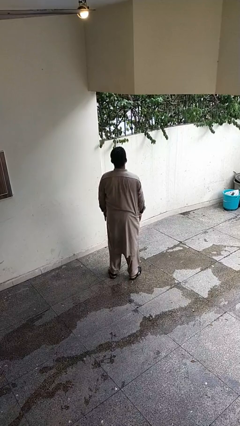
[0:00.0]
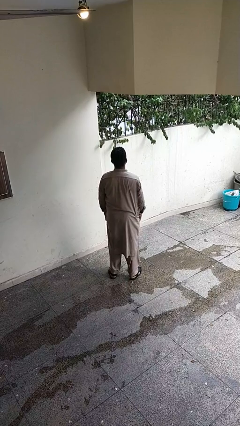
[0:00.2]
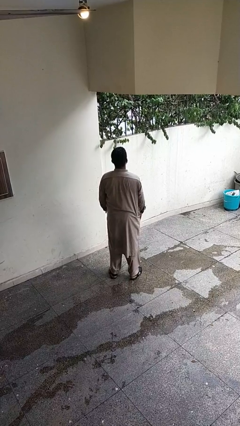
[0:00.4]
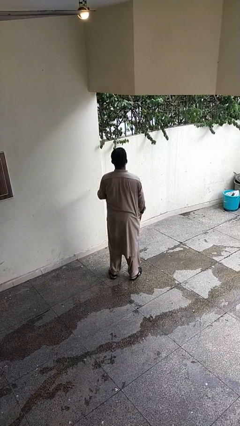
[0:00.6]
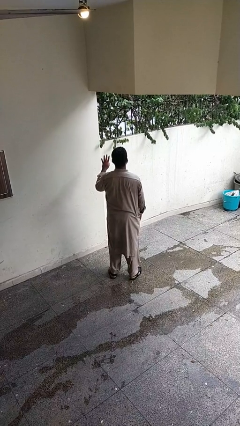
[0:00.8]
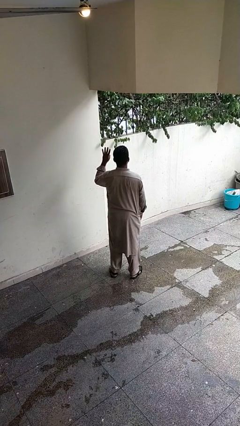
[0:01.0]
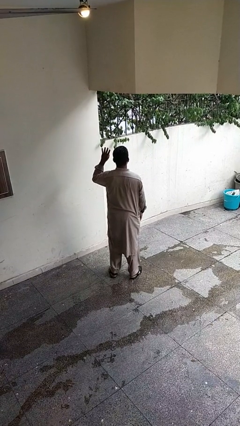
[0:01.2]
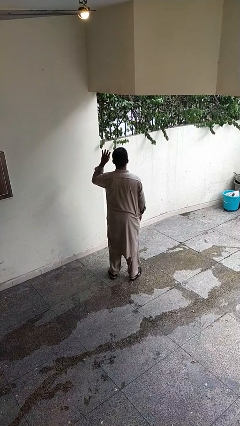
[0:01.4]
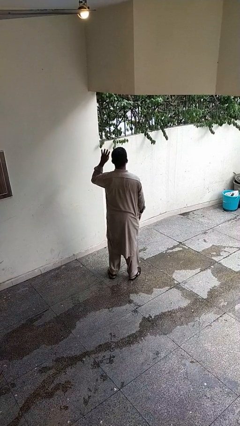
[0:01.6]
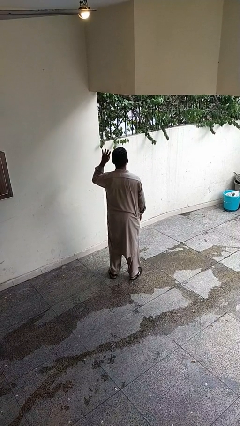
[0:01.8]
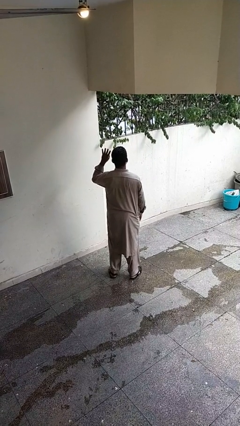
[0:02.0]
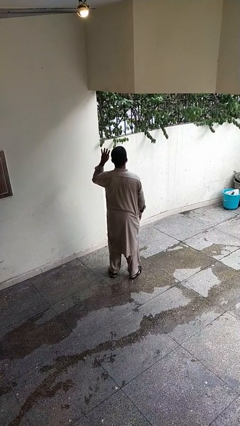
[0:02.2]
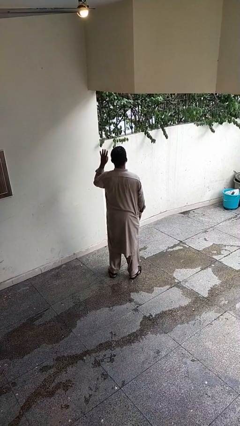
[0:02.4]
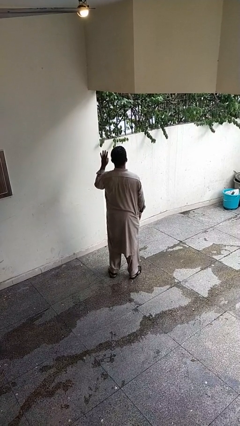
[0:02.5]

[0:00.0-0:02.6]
person gestures number four

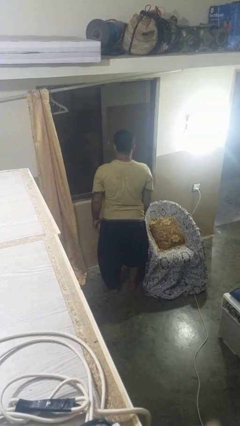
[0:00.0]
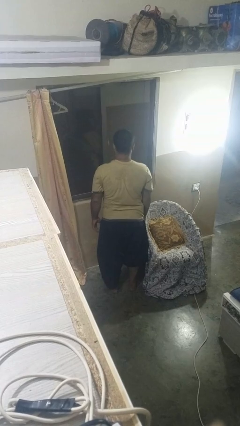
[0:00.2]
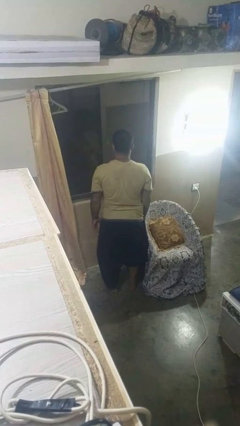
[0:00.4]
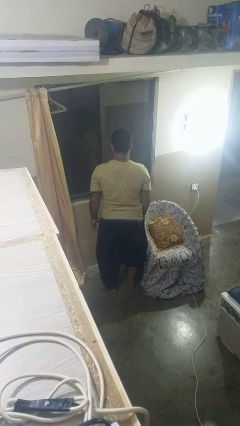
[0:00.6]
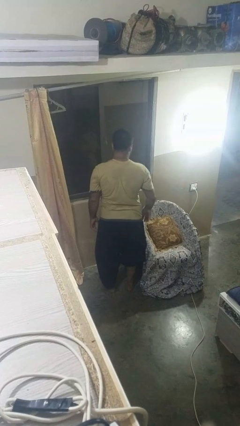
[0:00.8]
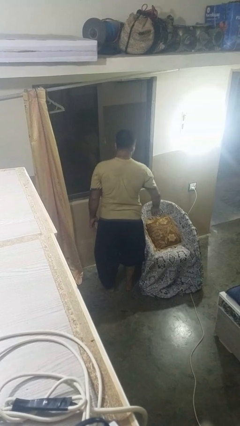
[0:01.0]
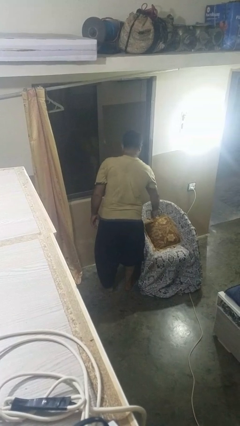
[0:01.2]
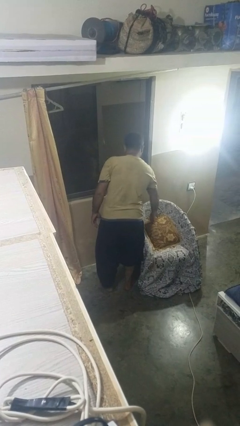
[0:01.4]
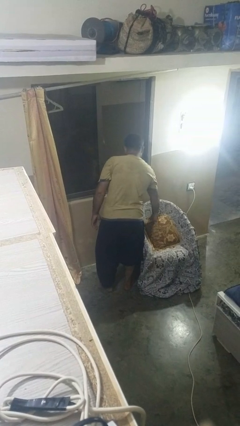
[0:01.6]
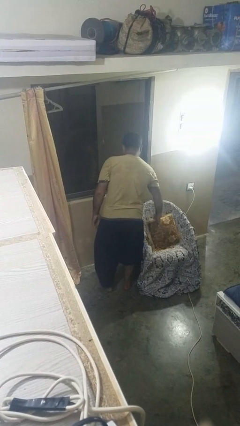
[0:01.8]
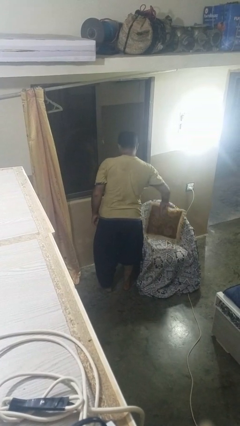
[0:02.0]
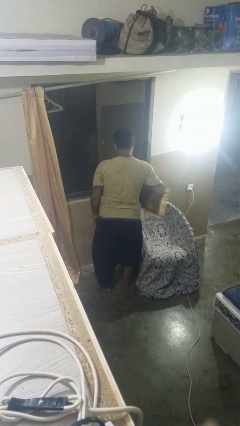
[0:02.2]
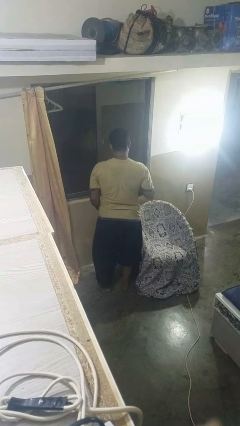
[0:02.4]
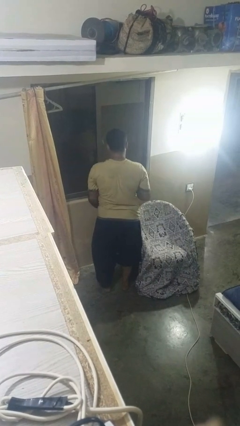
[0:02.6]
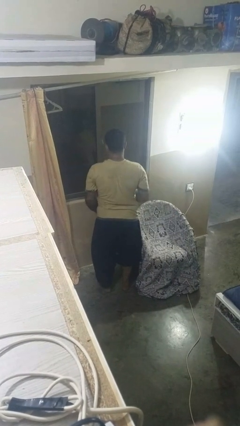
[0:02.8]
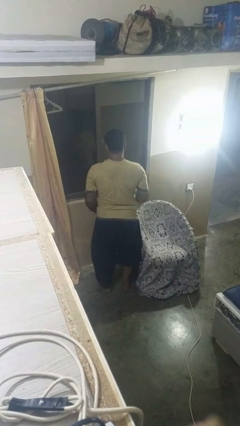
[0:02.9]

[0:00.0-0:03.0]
person picks up object from couch

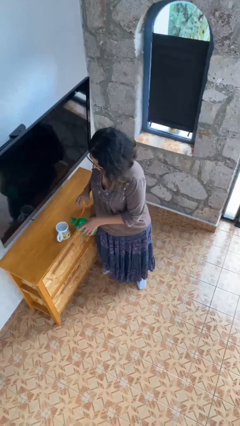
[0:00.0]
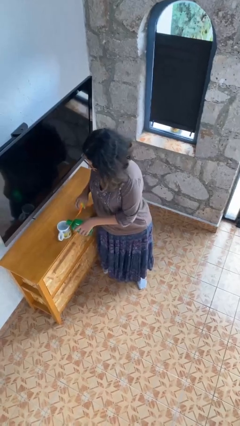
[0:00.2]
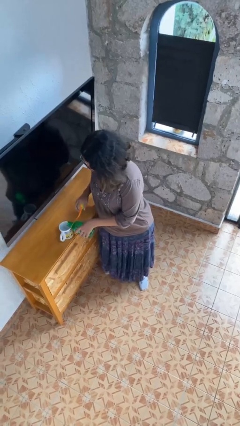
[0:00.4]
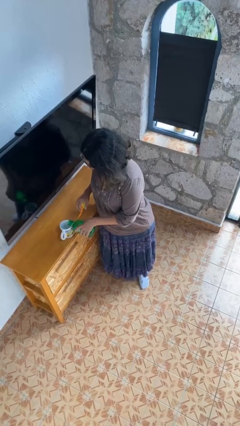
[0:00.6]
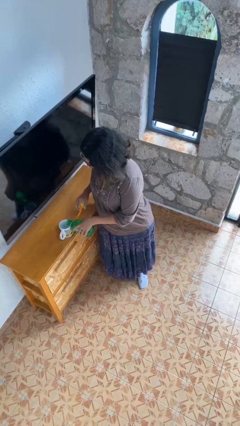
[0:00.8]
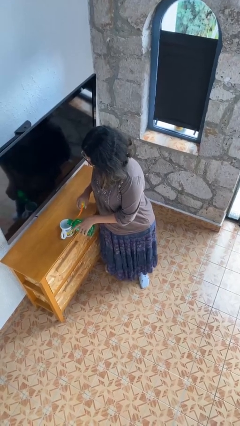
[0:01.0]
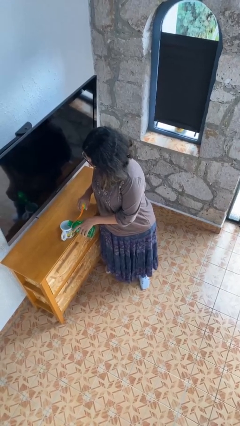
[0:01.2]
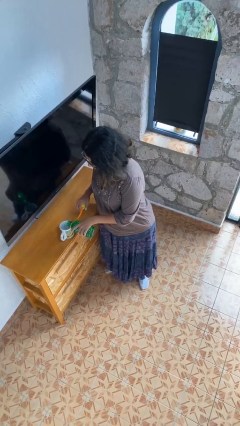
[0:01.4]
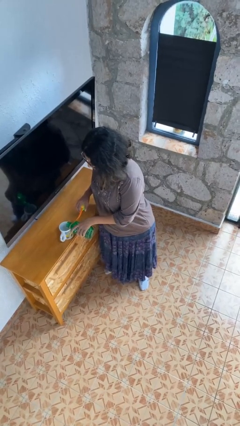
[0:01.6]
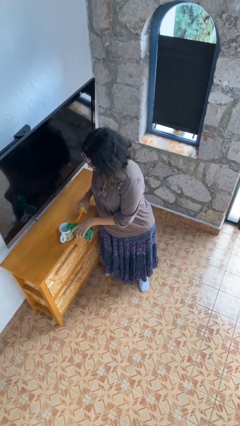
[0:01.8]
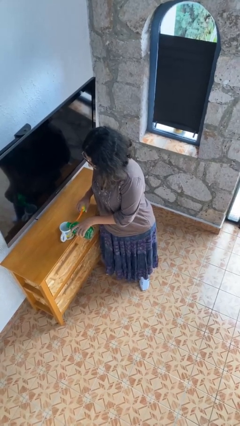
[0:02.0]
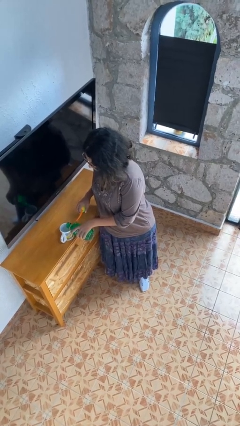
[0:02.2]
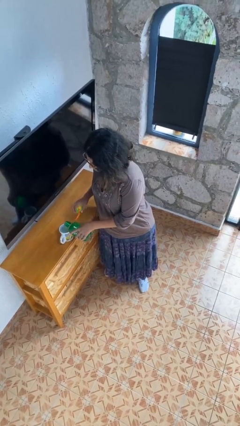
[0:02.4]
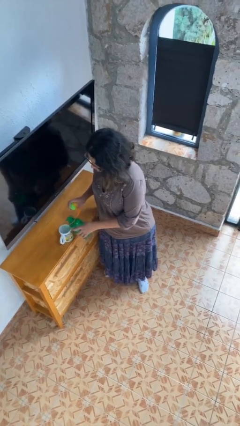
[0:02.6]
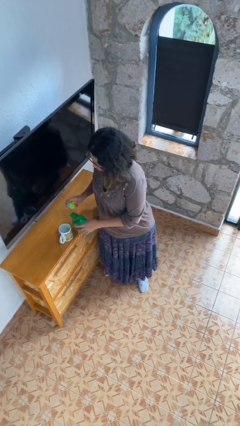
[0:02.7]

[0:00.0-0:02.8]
person pours liquid into cup

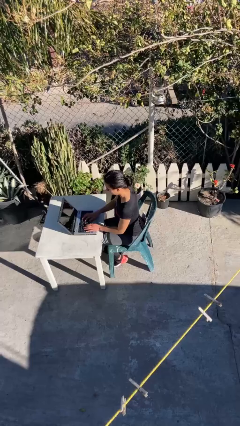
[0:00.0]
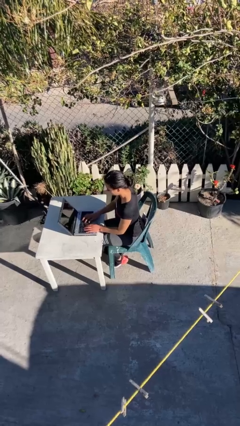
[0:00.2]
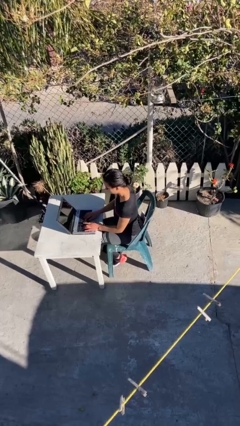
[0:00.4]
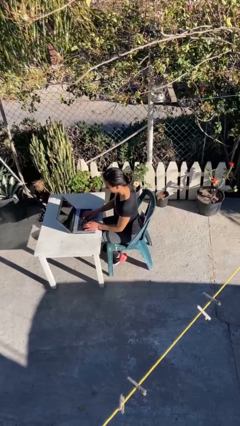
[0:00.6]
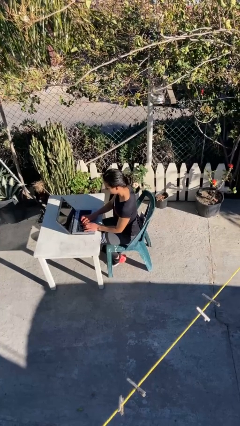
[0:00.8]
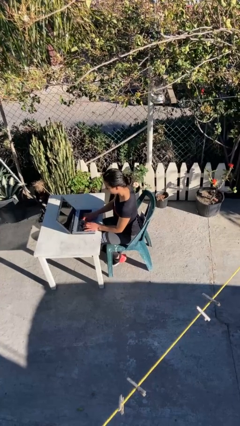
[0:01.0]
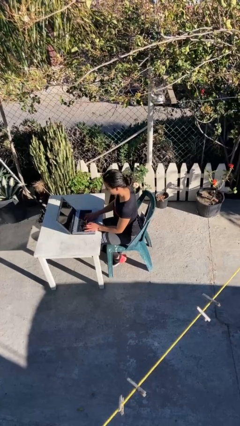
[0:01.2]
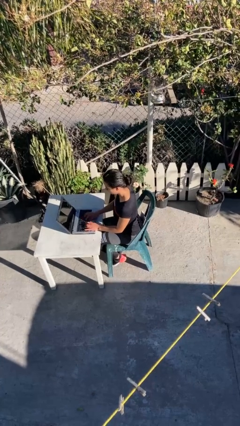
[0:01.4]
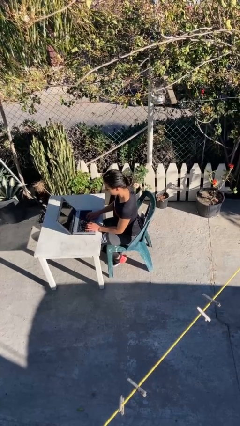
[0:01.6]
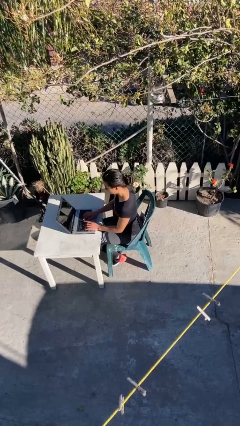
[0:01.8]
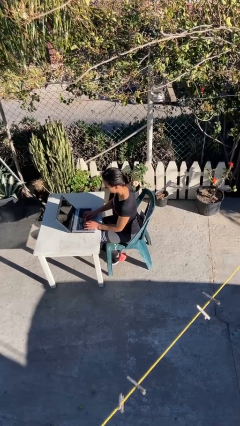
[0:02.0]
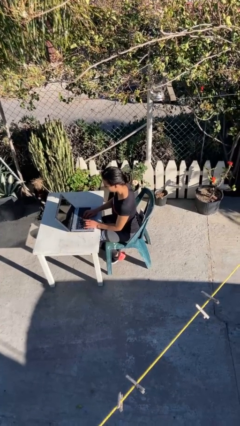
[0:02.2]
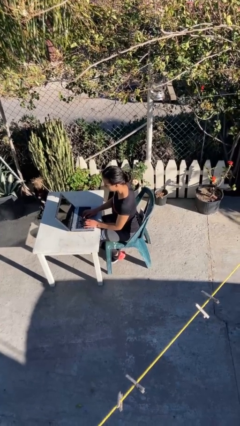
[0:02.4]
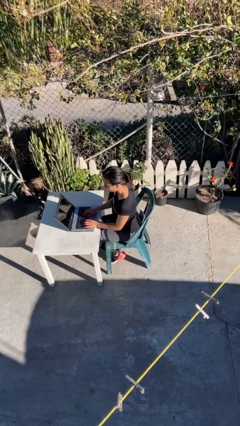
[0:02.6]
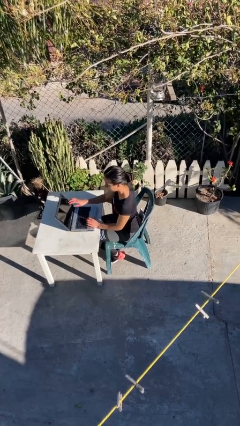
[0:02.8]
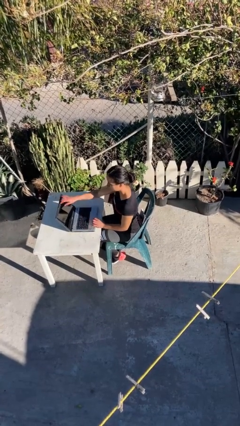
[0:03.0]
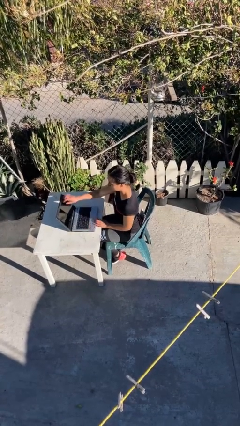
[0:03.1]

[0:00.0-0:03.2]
person interacts with laptop

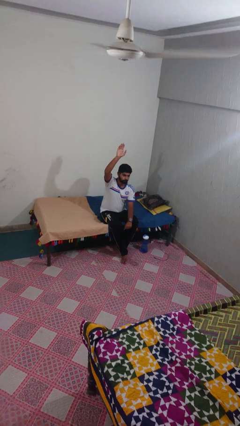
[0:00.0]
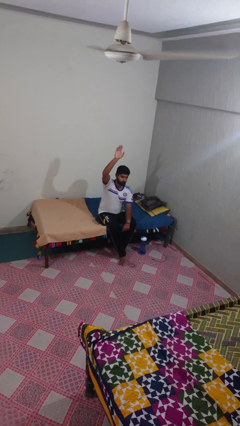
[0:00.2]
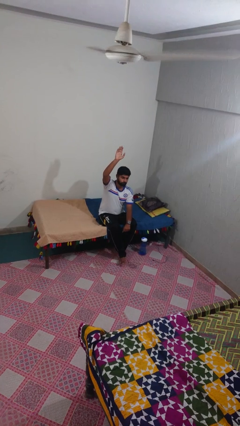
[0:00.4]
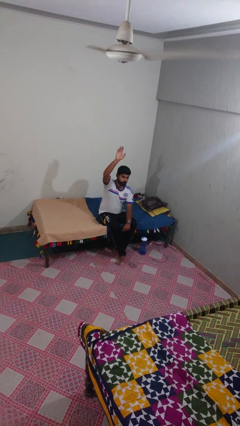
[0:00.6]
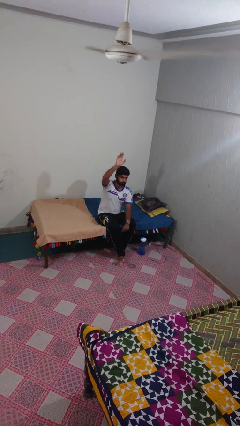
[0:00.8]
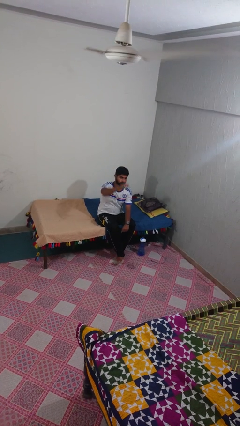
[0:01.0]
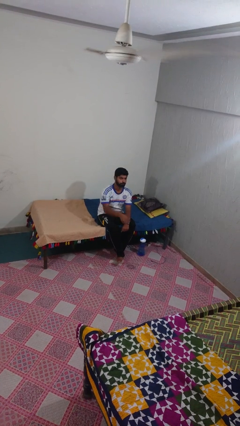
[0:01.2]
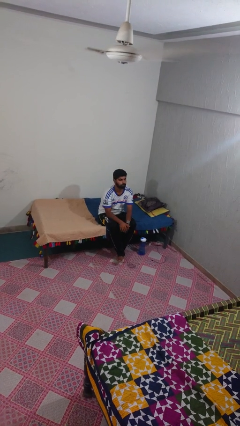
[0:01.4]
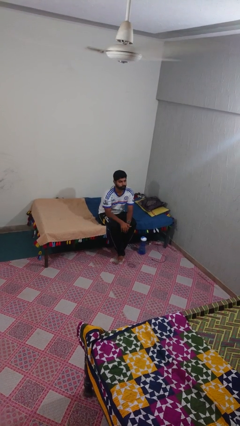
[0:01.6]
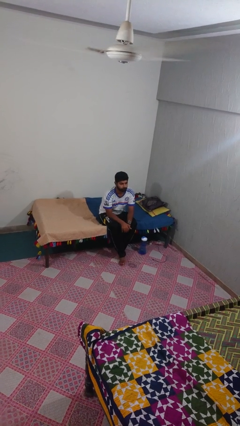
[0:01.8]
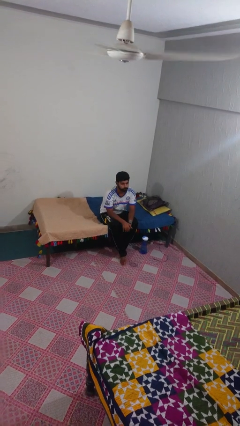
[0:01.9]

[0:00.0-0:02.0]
person gestures lower hand

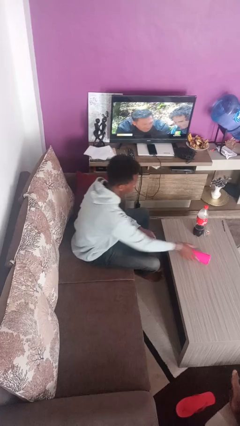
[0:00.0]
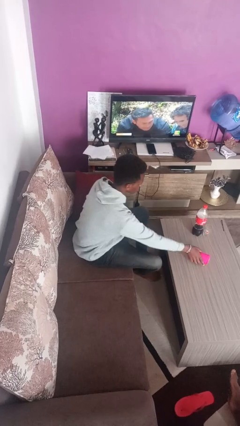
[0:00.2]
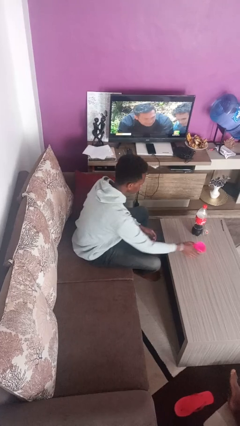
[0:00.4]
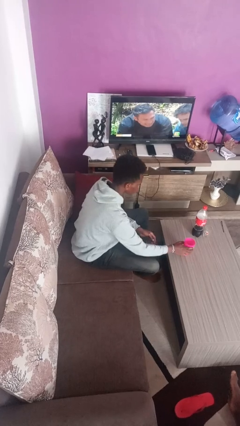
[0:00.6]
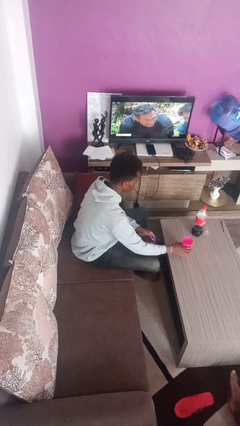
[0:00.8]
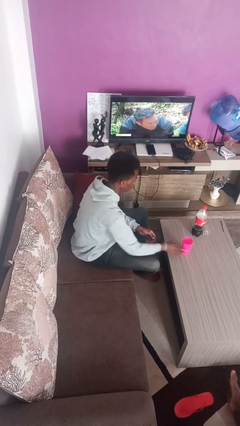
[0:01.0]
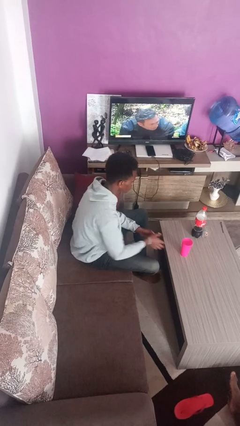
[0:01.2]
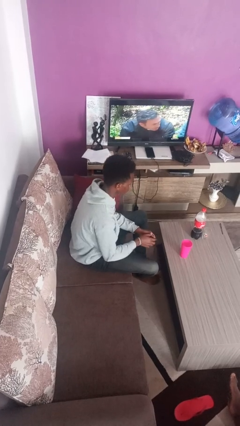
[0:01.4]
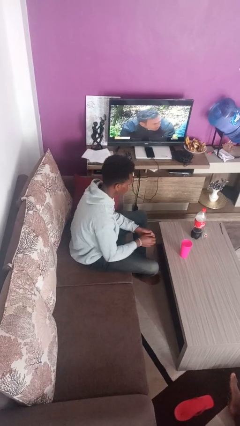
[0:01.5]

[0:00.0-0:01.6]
person sets upright glass

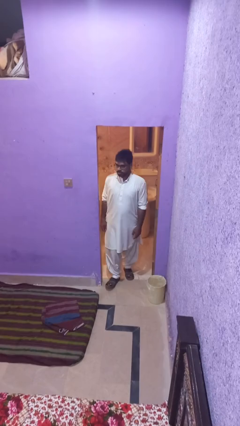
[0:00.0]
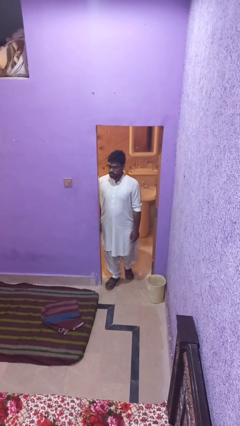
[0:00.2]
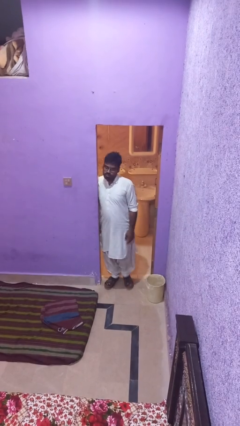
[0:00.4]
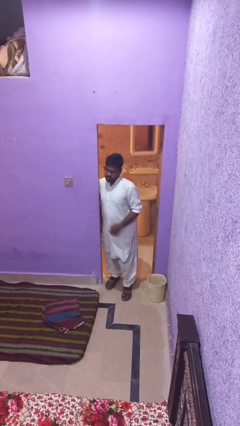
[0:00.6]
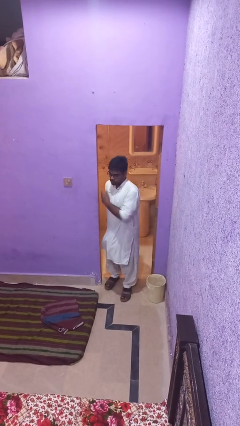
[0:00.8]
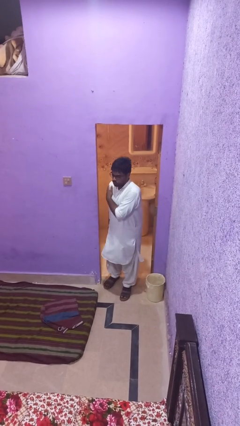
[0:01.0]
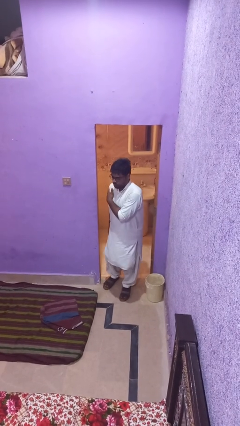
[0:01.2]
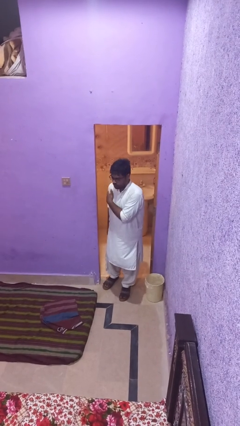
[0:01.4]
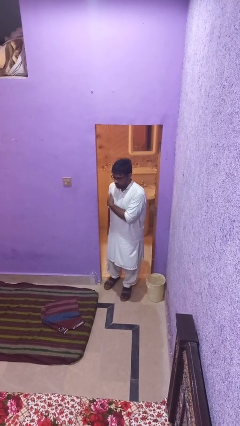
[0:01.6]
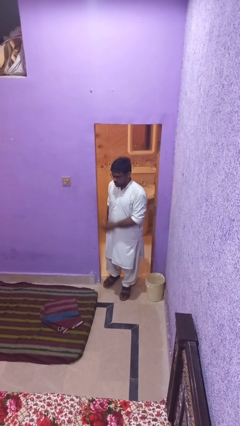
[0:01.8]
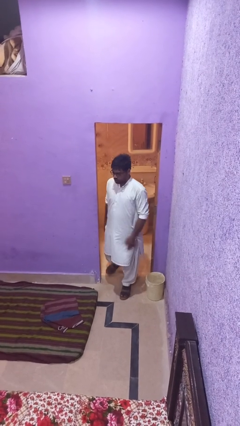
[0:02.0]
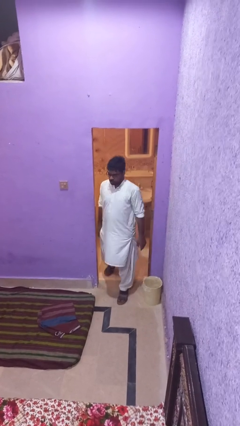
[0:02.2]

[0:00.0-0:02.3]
person bumps into wall
